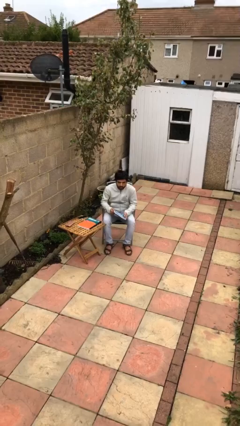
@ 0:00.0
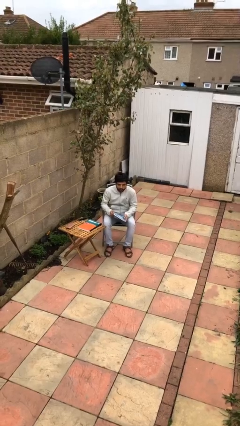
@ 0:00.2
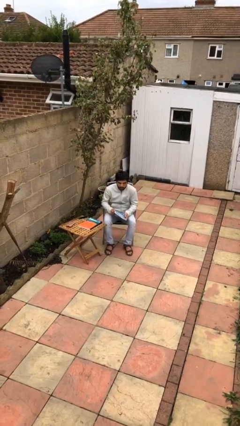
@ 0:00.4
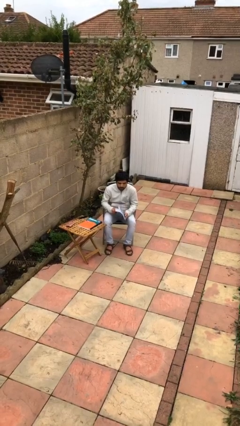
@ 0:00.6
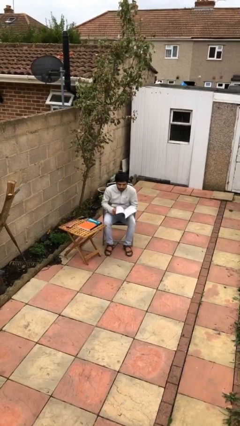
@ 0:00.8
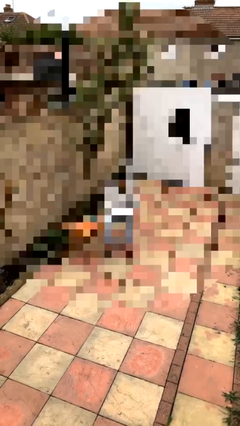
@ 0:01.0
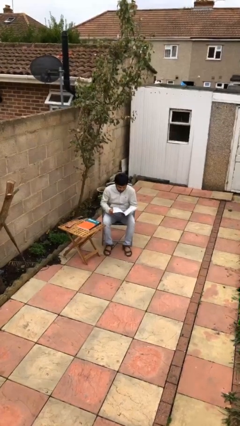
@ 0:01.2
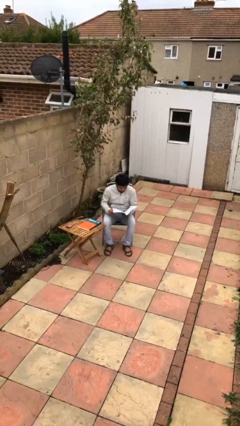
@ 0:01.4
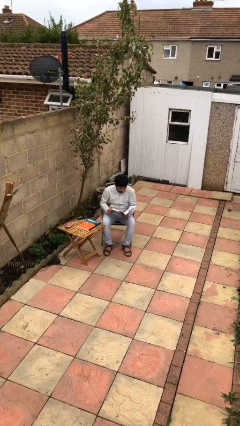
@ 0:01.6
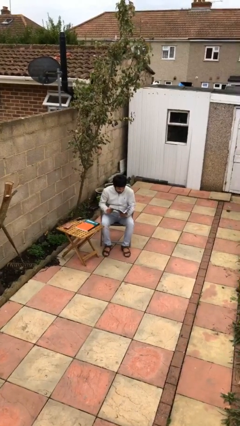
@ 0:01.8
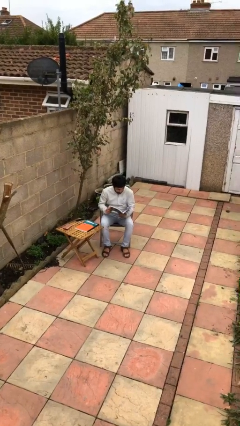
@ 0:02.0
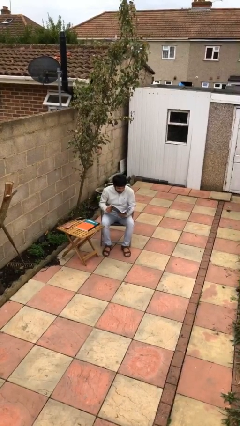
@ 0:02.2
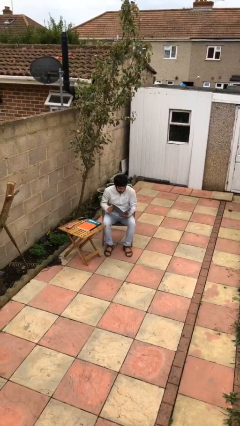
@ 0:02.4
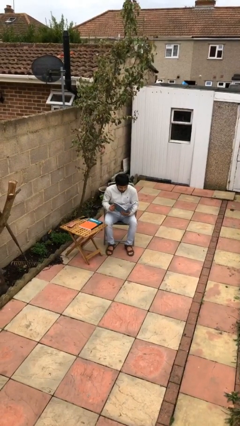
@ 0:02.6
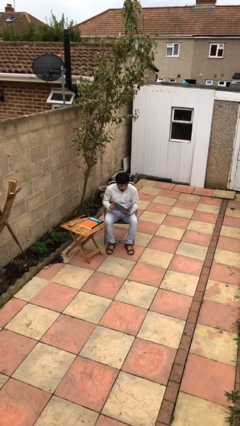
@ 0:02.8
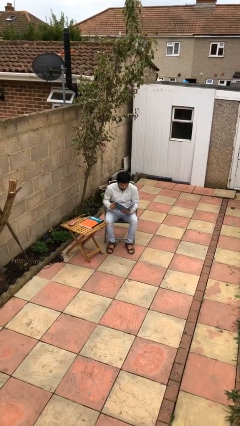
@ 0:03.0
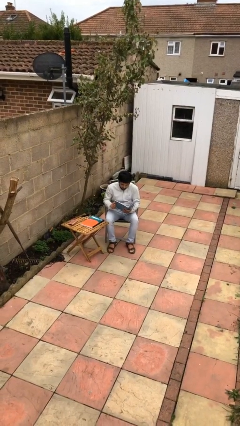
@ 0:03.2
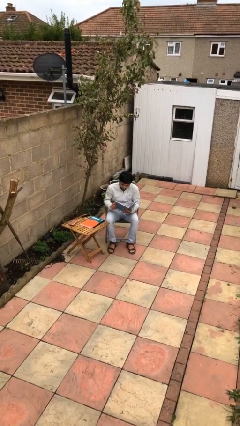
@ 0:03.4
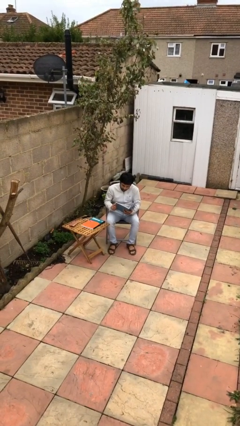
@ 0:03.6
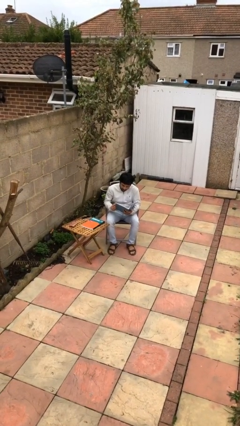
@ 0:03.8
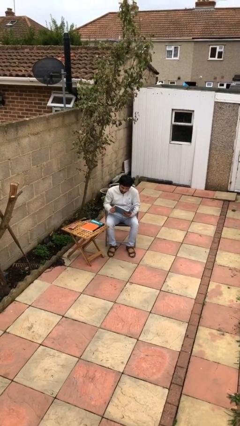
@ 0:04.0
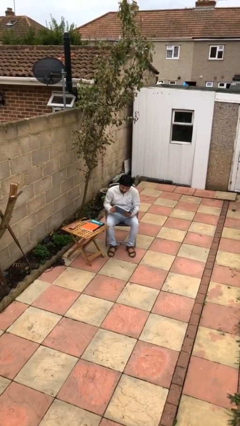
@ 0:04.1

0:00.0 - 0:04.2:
person reads document

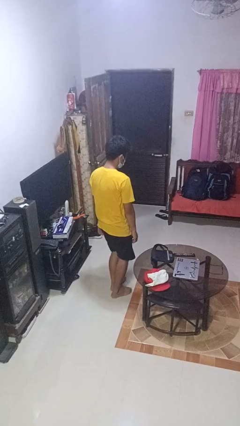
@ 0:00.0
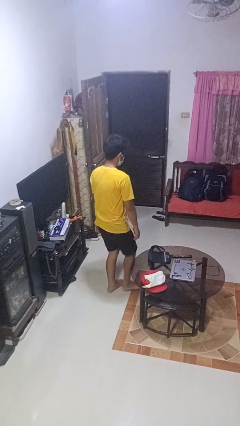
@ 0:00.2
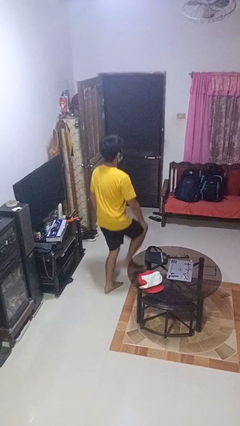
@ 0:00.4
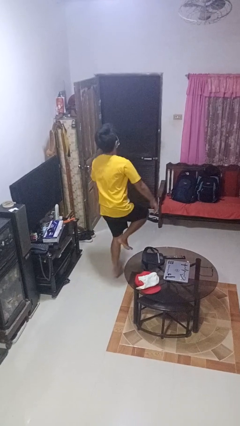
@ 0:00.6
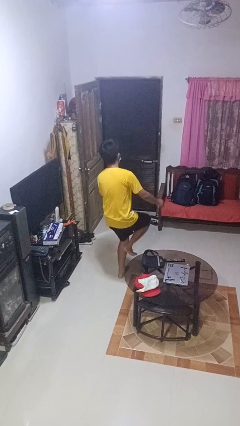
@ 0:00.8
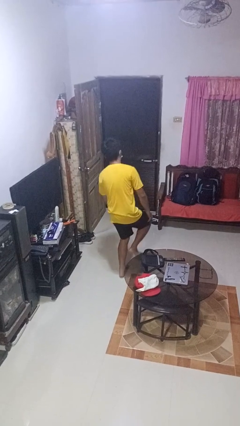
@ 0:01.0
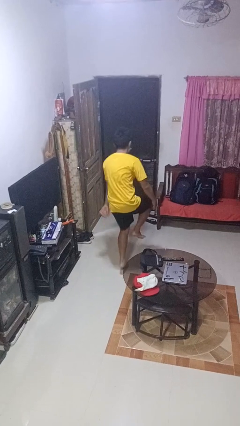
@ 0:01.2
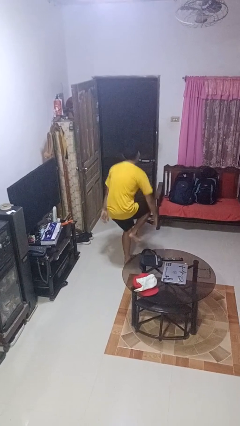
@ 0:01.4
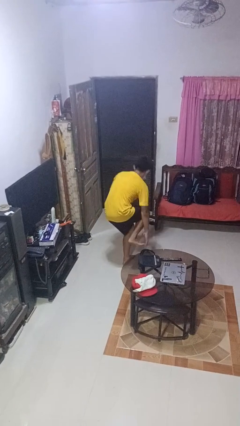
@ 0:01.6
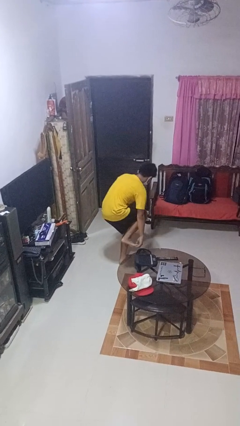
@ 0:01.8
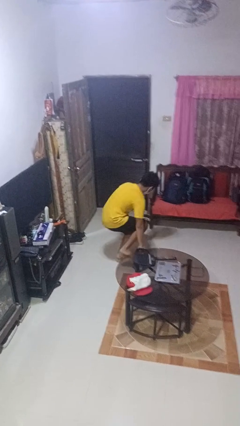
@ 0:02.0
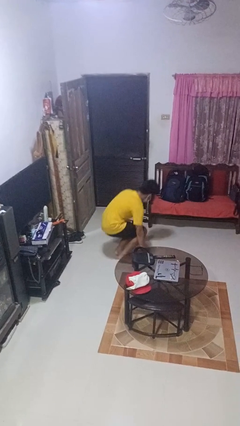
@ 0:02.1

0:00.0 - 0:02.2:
person trips on object on floor

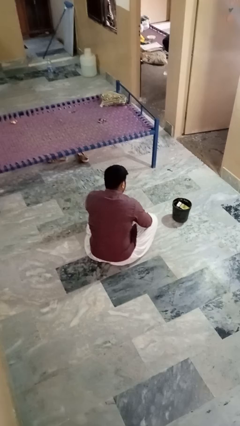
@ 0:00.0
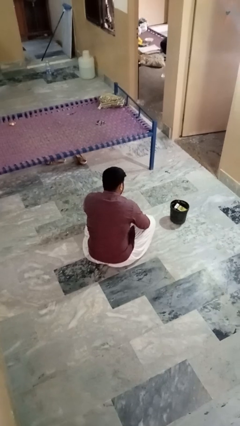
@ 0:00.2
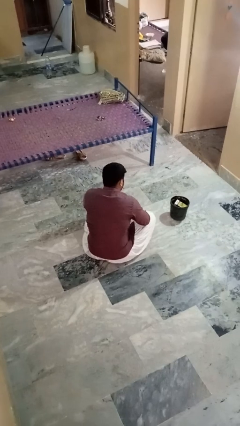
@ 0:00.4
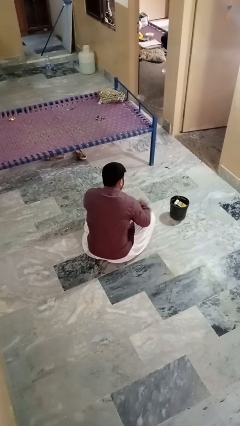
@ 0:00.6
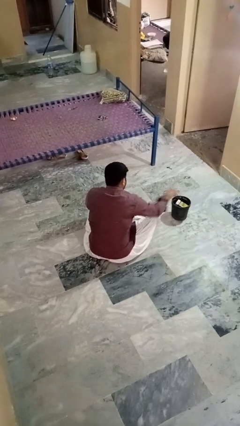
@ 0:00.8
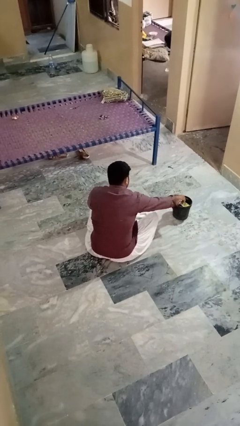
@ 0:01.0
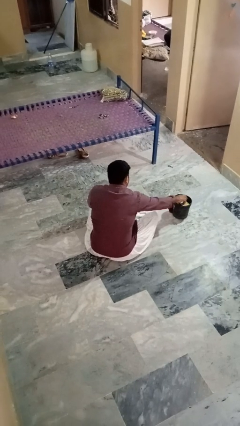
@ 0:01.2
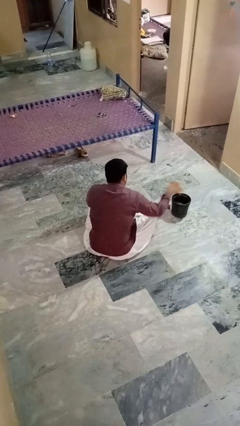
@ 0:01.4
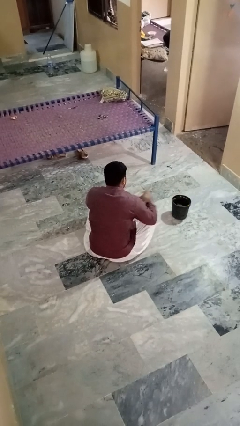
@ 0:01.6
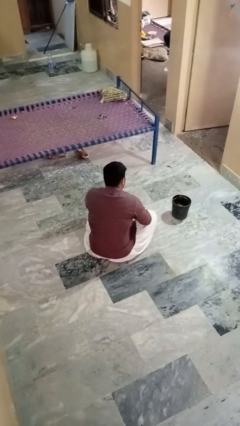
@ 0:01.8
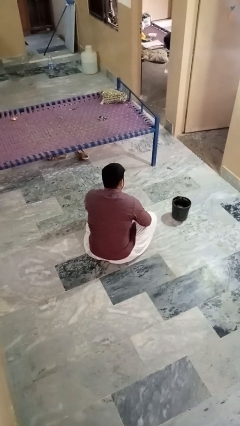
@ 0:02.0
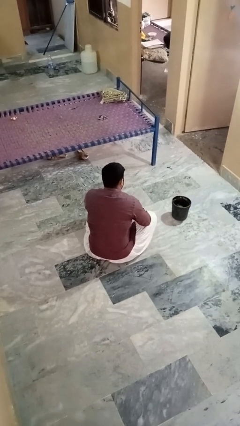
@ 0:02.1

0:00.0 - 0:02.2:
person takes object from basket

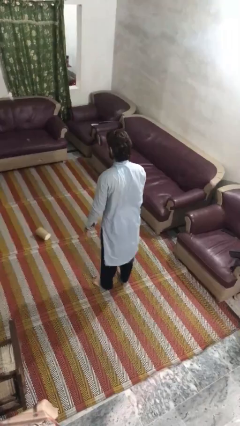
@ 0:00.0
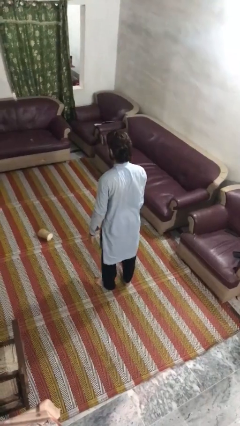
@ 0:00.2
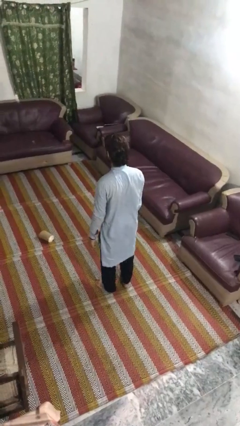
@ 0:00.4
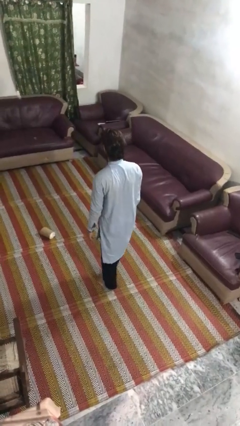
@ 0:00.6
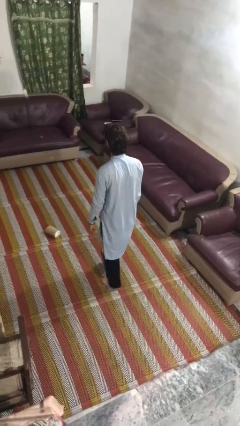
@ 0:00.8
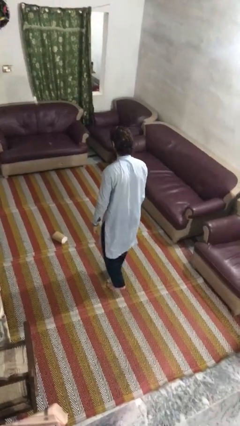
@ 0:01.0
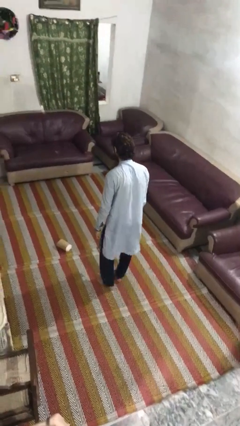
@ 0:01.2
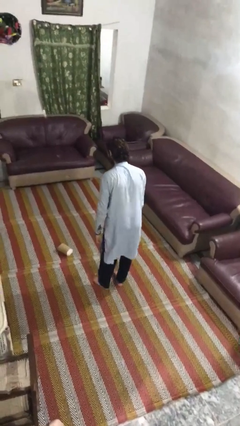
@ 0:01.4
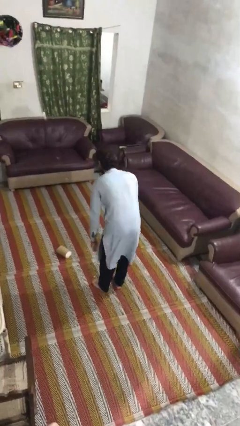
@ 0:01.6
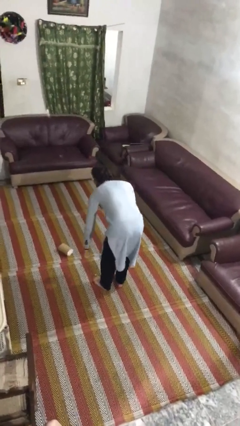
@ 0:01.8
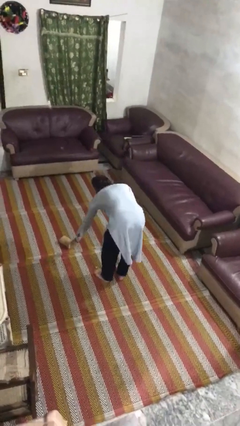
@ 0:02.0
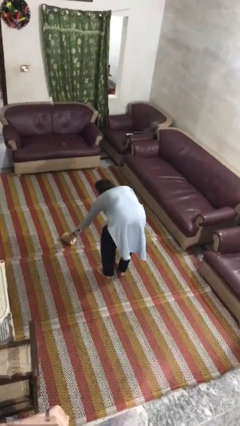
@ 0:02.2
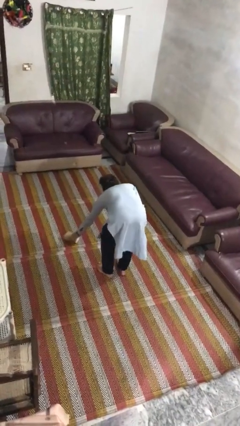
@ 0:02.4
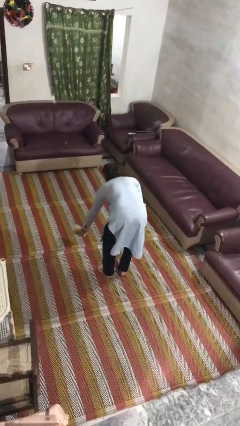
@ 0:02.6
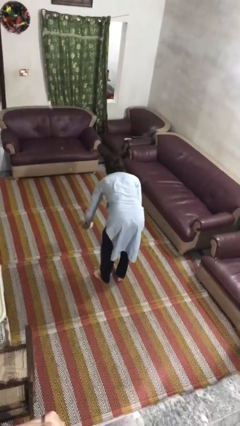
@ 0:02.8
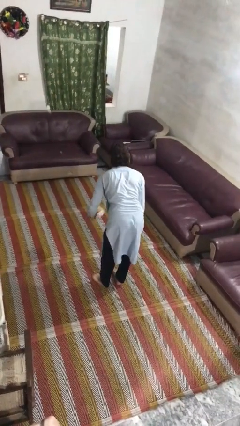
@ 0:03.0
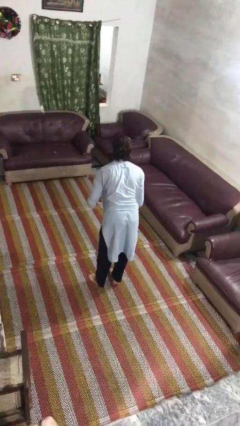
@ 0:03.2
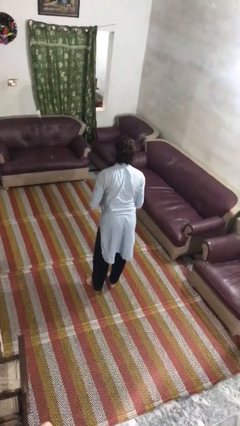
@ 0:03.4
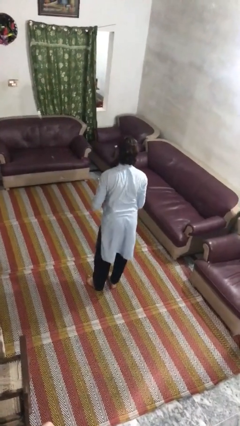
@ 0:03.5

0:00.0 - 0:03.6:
person picks up object from floor

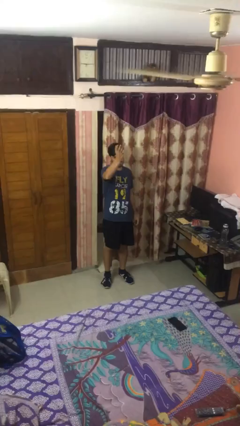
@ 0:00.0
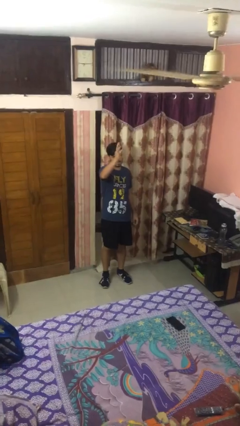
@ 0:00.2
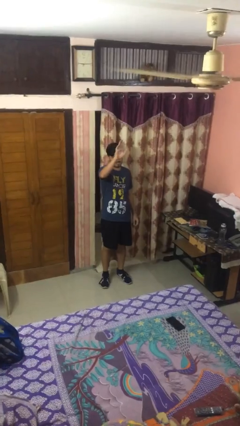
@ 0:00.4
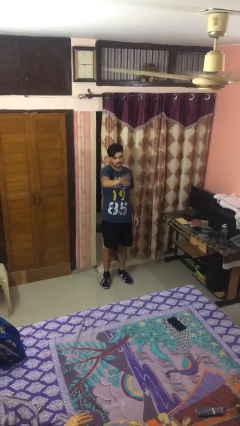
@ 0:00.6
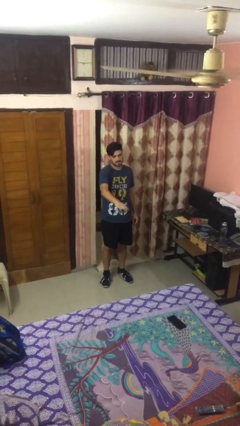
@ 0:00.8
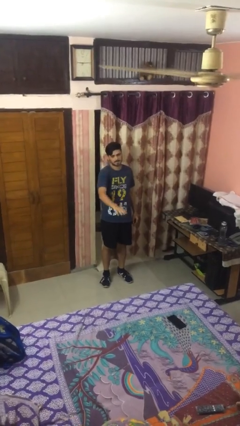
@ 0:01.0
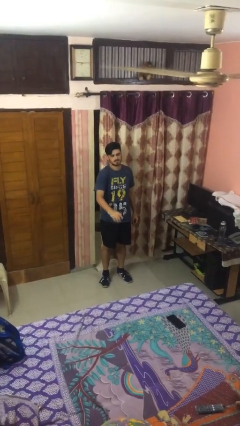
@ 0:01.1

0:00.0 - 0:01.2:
person gestures swipe down

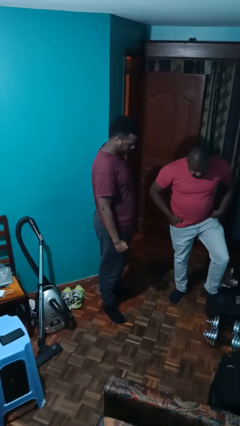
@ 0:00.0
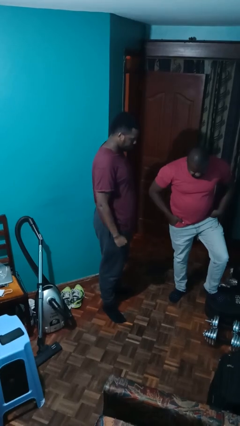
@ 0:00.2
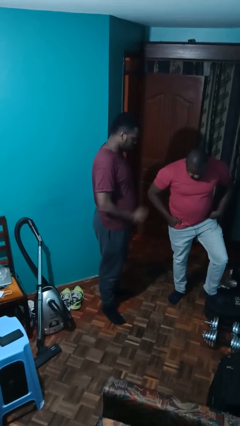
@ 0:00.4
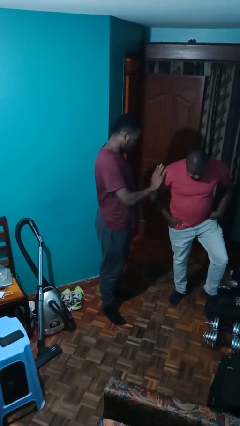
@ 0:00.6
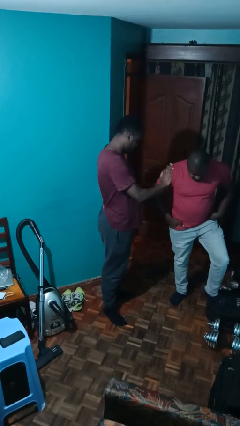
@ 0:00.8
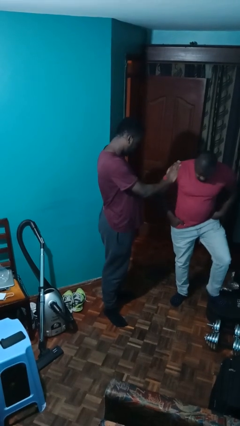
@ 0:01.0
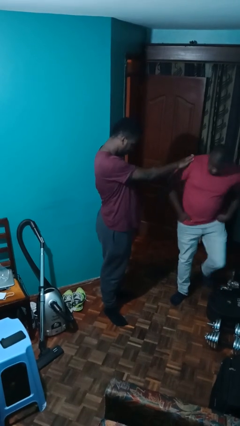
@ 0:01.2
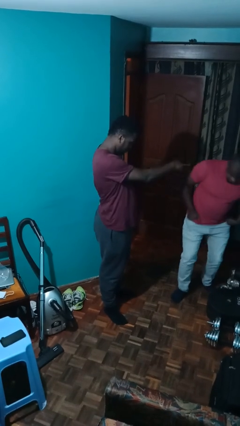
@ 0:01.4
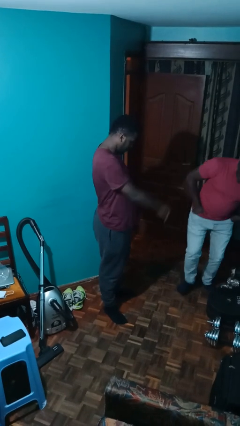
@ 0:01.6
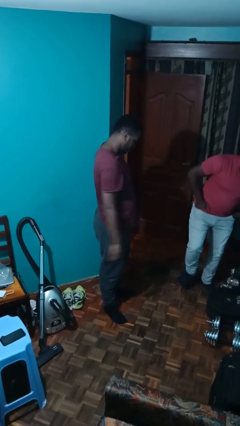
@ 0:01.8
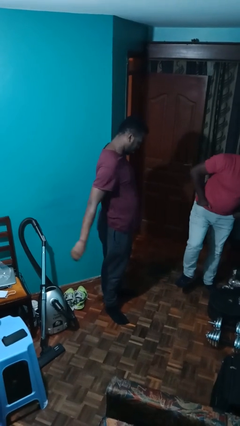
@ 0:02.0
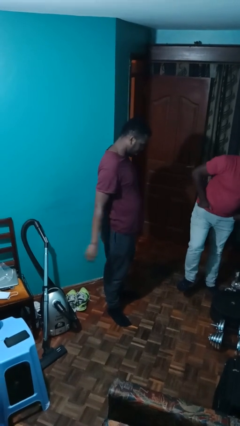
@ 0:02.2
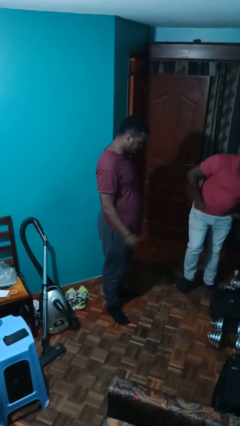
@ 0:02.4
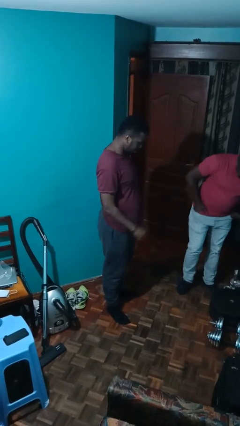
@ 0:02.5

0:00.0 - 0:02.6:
person shoves person

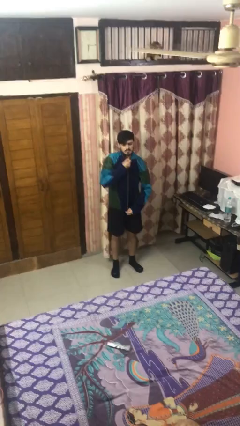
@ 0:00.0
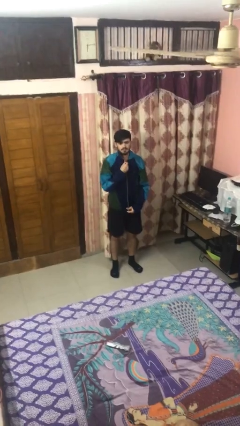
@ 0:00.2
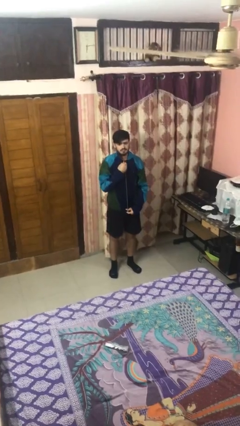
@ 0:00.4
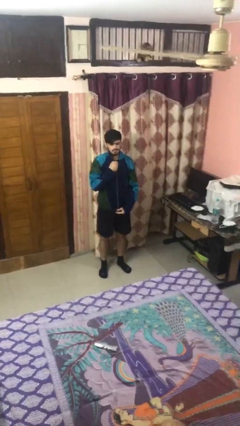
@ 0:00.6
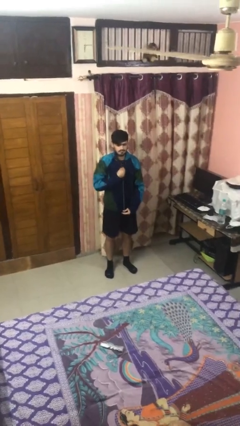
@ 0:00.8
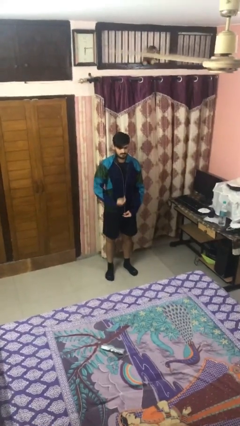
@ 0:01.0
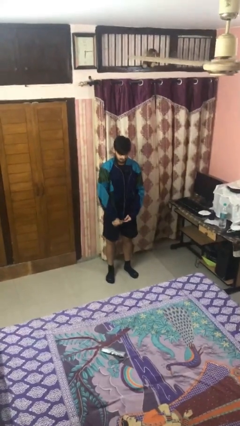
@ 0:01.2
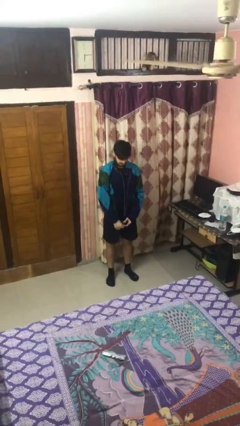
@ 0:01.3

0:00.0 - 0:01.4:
person unzips jacket
